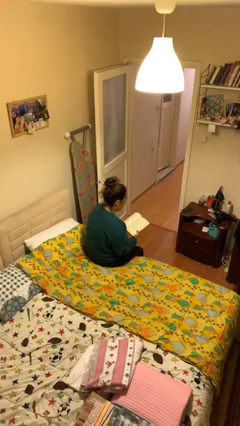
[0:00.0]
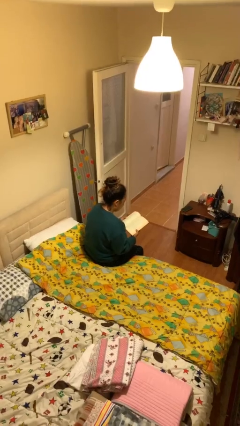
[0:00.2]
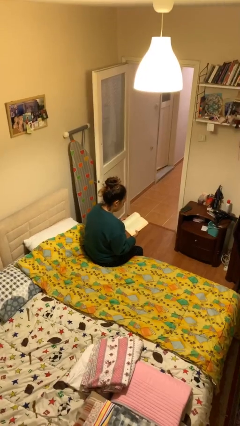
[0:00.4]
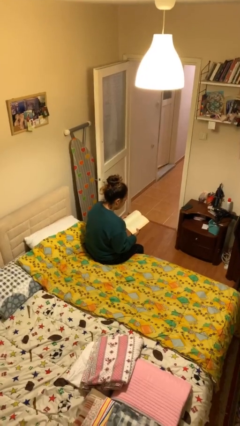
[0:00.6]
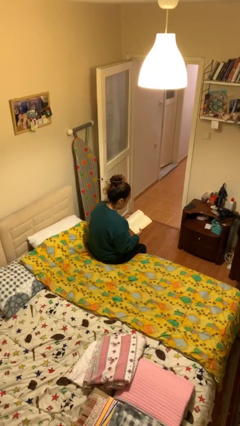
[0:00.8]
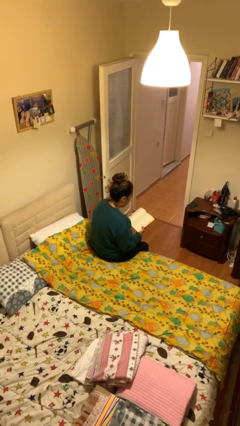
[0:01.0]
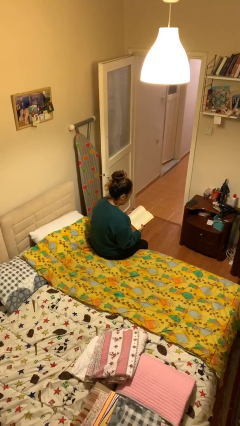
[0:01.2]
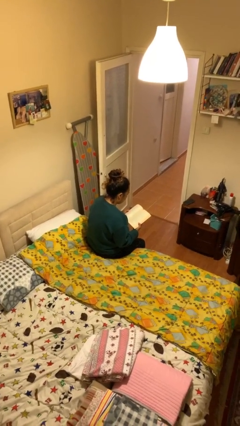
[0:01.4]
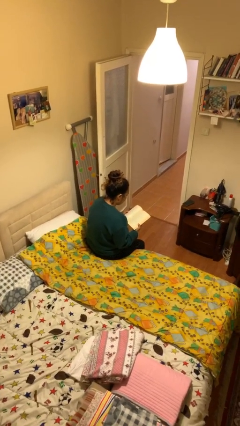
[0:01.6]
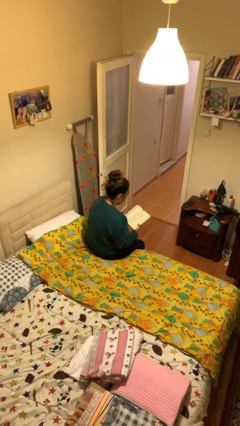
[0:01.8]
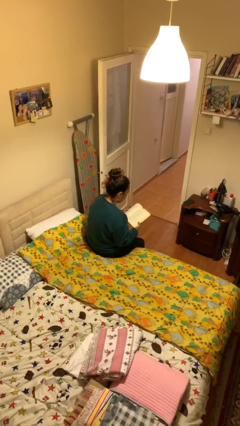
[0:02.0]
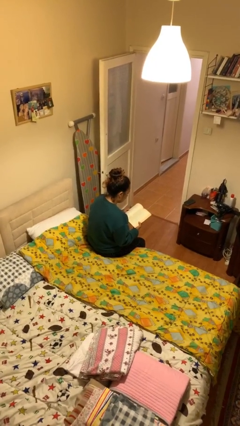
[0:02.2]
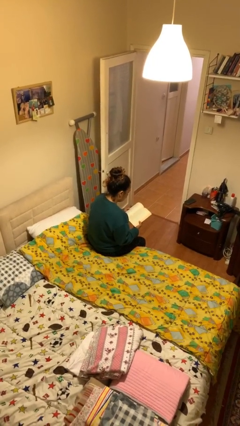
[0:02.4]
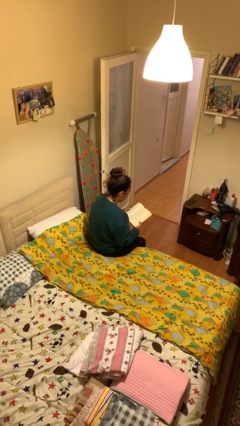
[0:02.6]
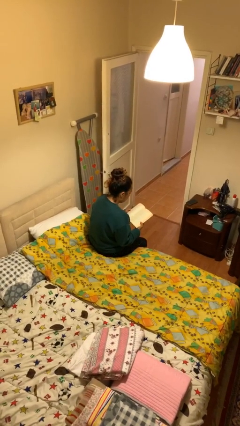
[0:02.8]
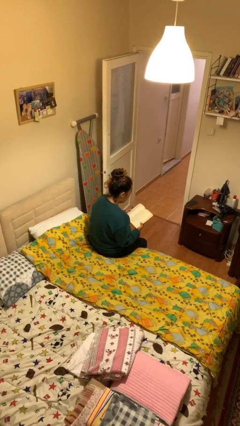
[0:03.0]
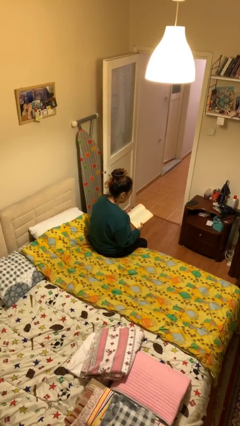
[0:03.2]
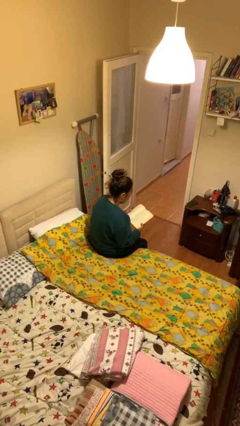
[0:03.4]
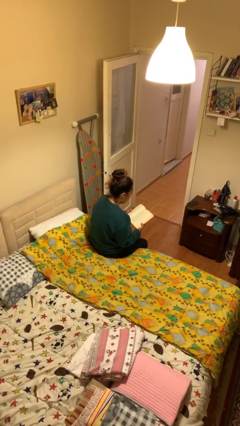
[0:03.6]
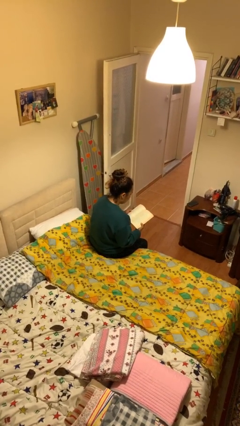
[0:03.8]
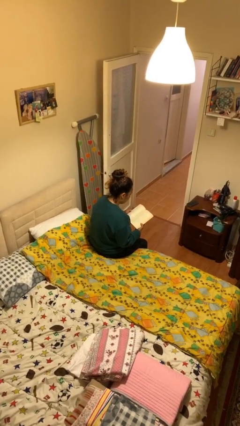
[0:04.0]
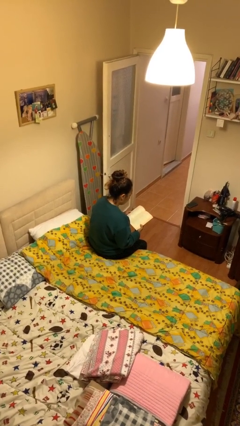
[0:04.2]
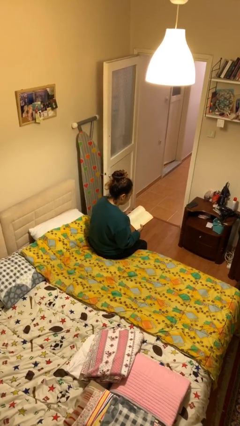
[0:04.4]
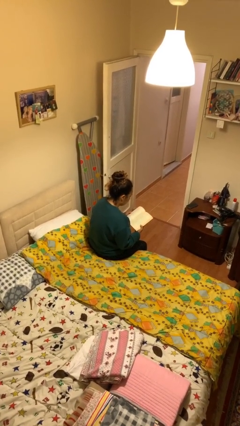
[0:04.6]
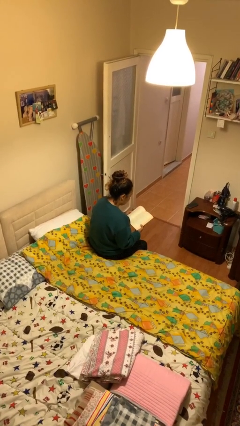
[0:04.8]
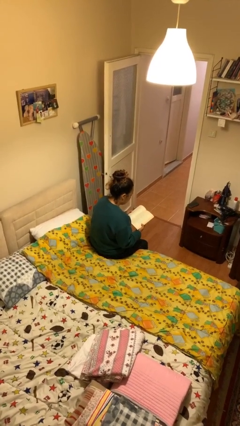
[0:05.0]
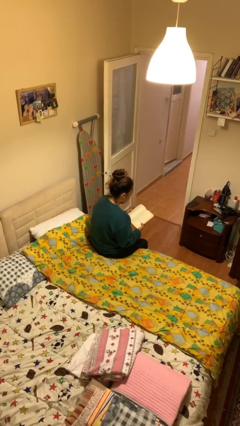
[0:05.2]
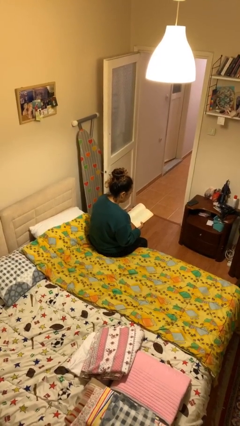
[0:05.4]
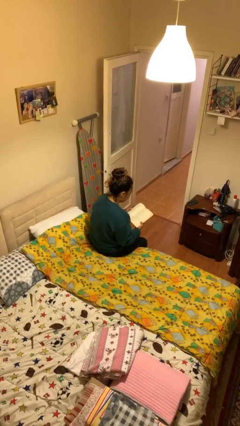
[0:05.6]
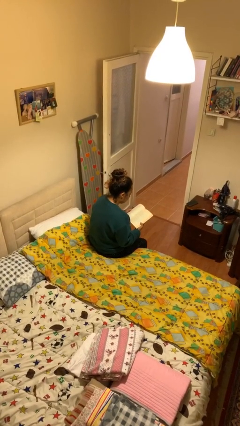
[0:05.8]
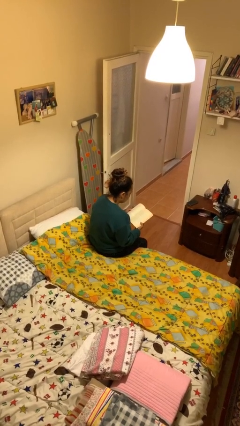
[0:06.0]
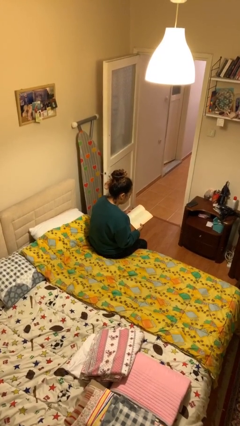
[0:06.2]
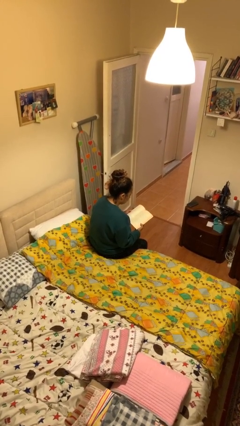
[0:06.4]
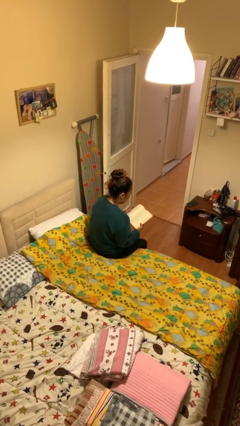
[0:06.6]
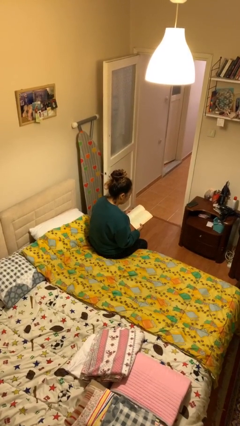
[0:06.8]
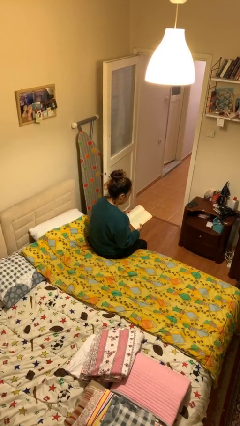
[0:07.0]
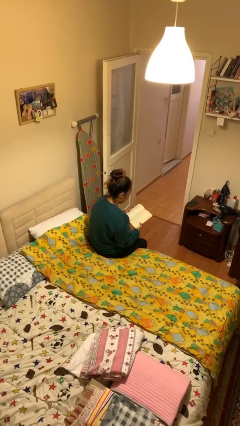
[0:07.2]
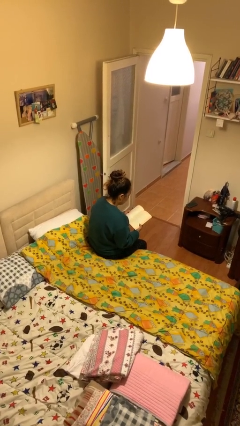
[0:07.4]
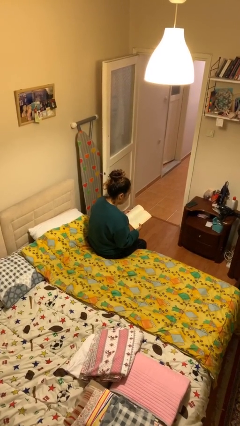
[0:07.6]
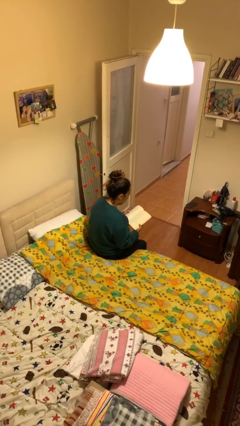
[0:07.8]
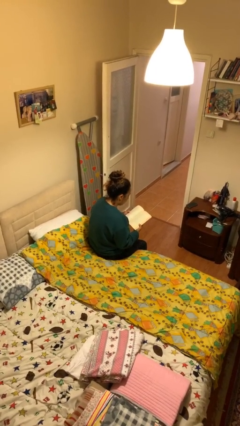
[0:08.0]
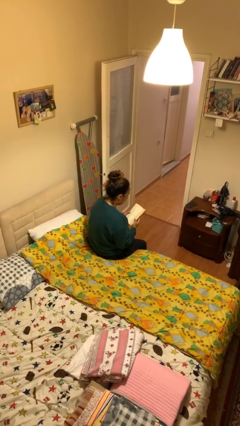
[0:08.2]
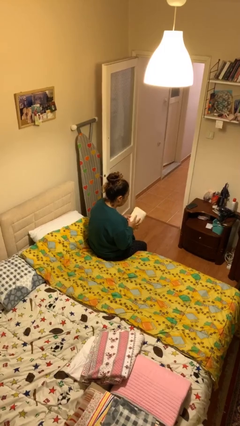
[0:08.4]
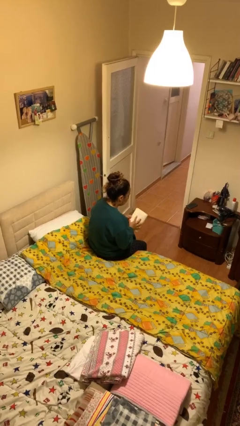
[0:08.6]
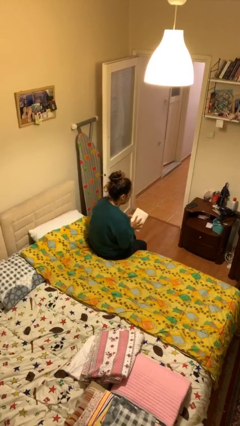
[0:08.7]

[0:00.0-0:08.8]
person reads document

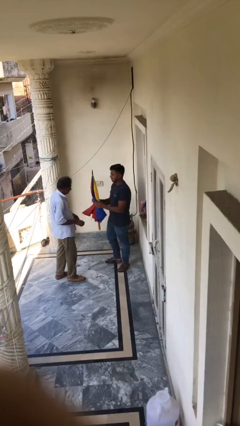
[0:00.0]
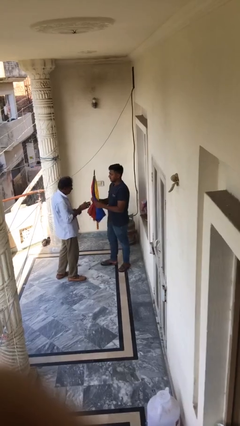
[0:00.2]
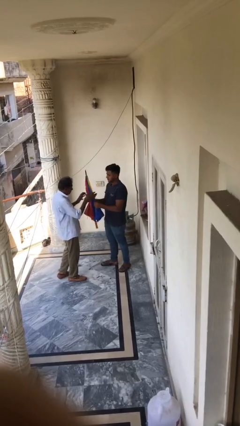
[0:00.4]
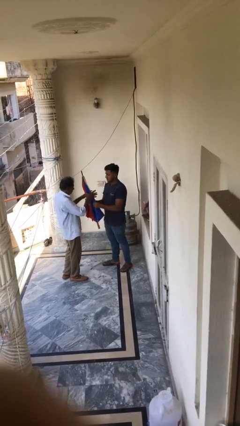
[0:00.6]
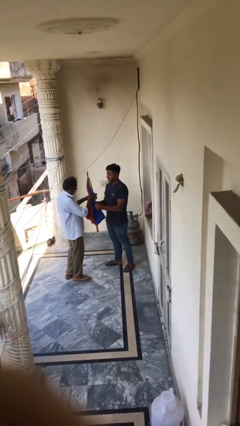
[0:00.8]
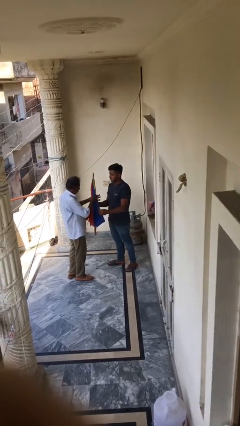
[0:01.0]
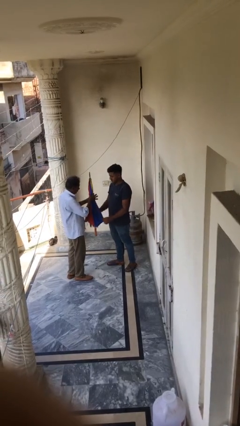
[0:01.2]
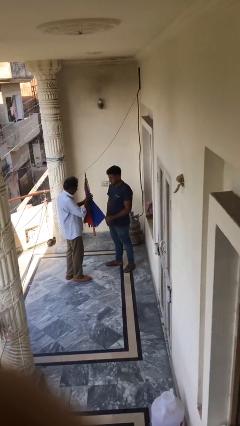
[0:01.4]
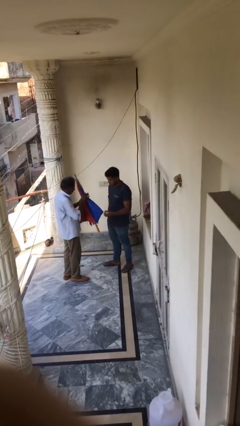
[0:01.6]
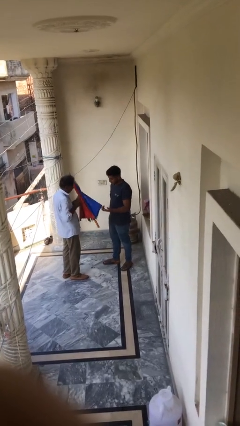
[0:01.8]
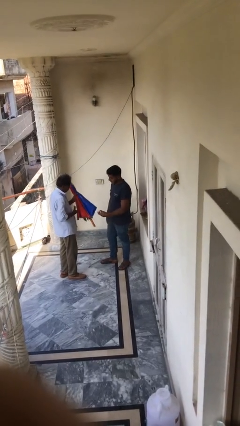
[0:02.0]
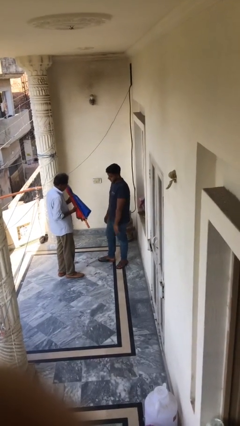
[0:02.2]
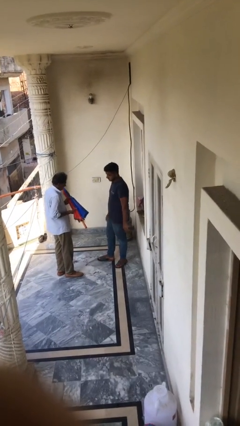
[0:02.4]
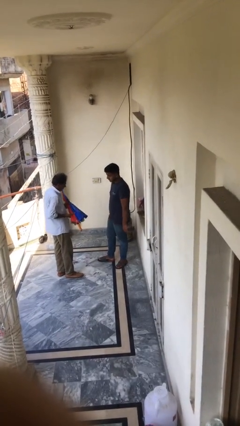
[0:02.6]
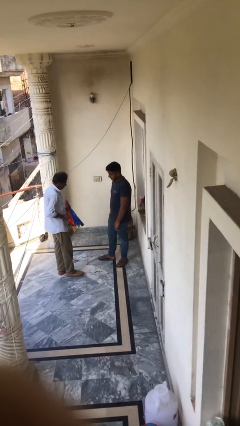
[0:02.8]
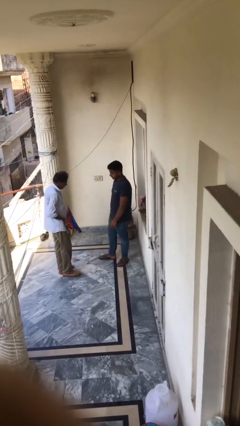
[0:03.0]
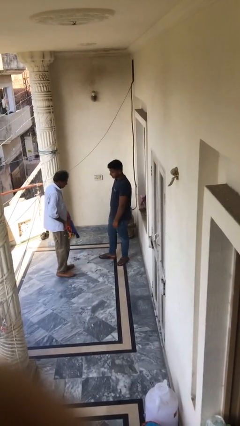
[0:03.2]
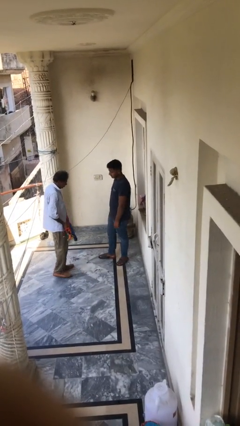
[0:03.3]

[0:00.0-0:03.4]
person transfers object to person

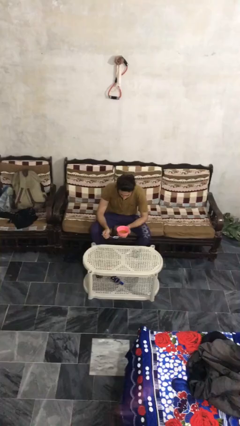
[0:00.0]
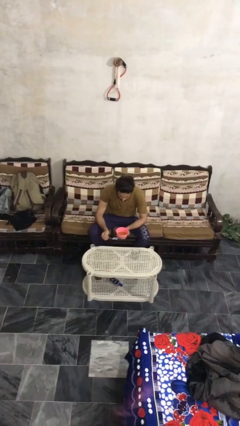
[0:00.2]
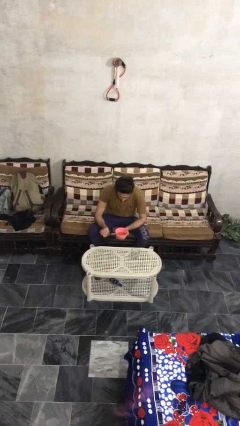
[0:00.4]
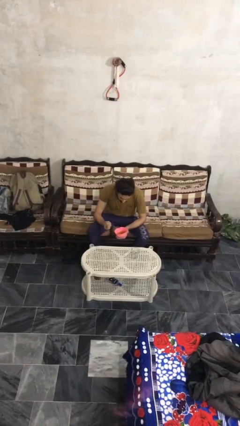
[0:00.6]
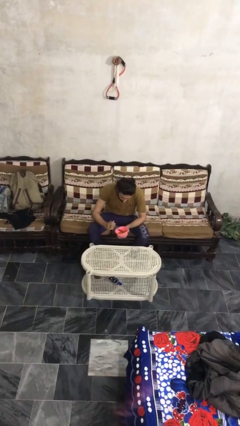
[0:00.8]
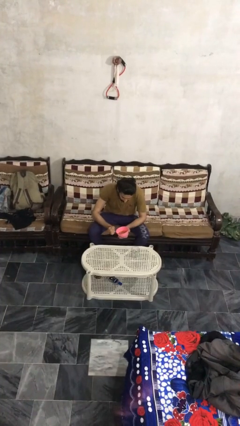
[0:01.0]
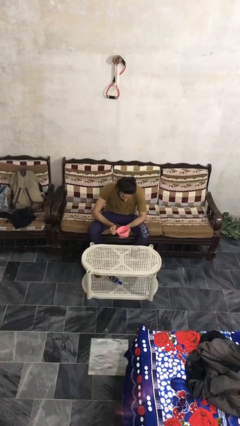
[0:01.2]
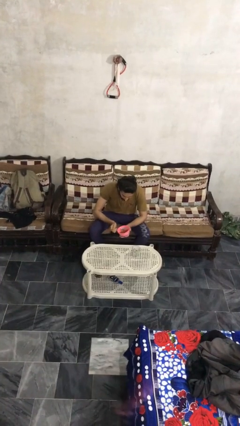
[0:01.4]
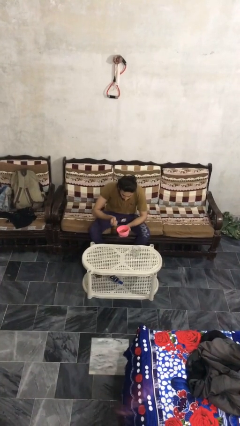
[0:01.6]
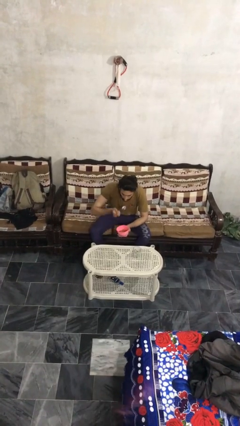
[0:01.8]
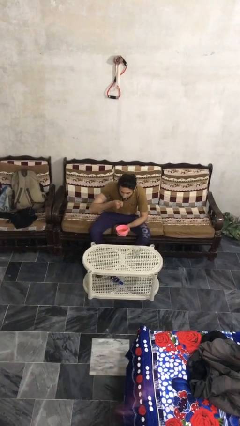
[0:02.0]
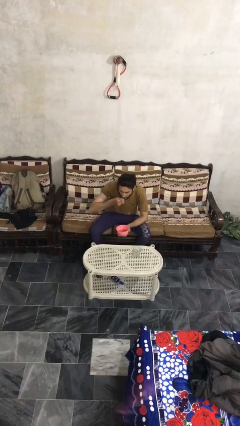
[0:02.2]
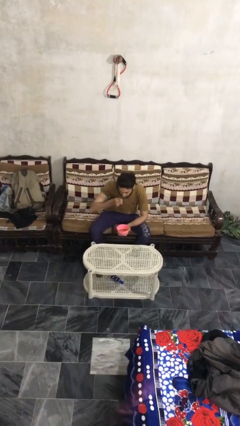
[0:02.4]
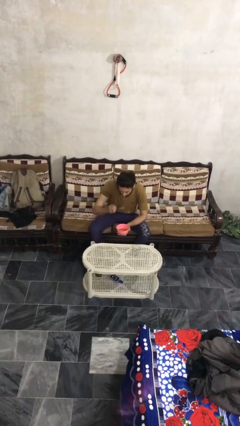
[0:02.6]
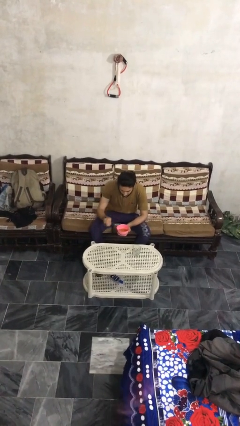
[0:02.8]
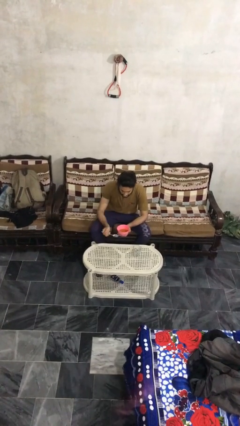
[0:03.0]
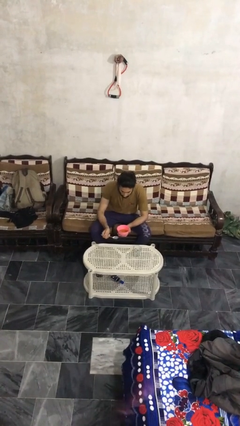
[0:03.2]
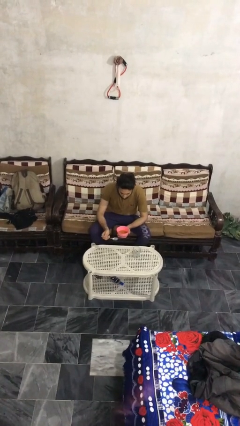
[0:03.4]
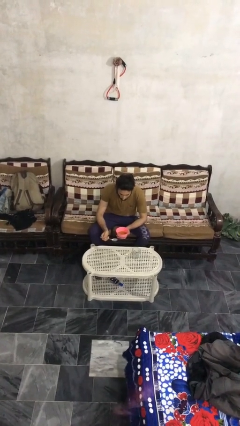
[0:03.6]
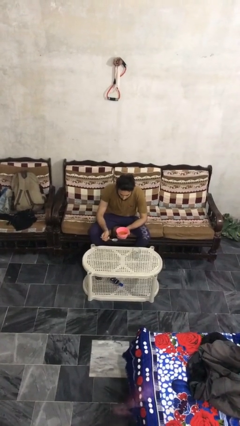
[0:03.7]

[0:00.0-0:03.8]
person eats with utensil

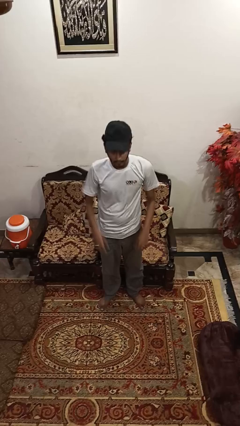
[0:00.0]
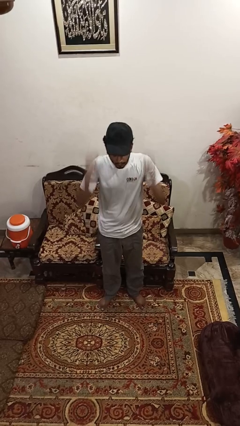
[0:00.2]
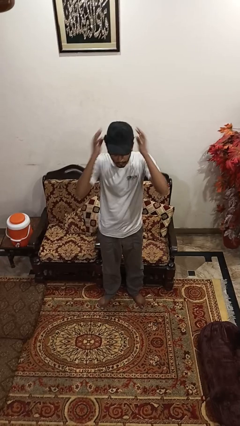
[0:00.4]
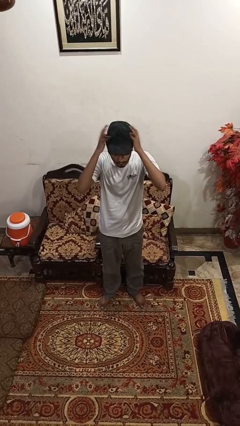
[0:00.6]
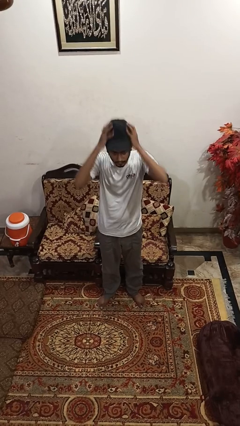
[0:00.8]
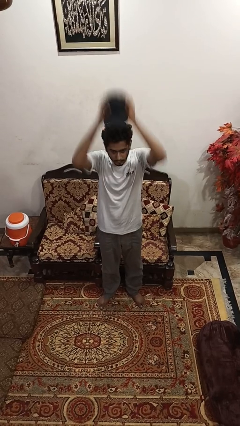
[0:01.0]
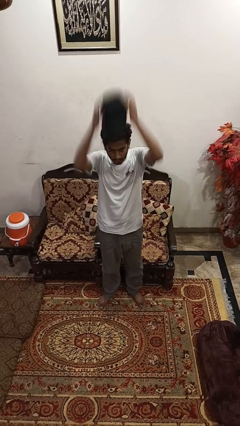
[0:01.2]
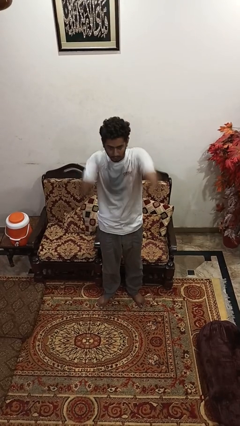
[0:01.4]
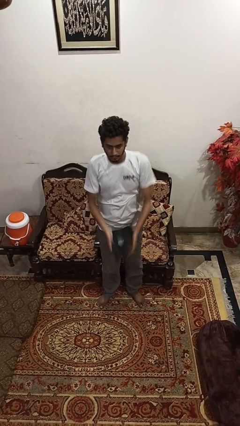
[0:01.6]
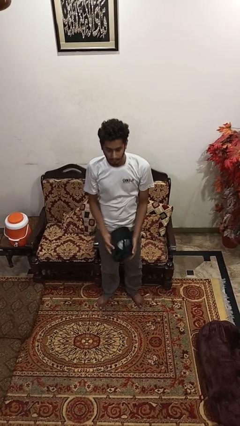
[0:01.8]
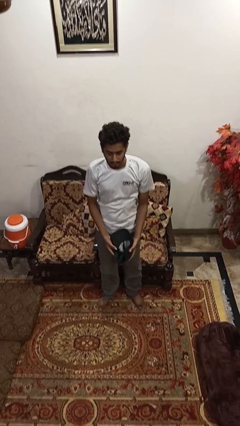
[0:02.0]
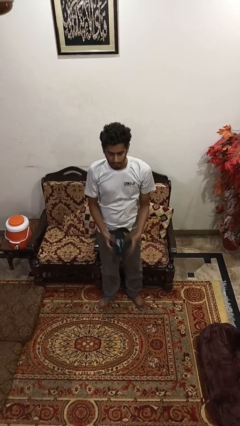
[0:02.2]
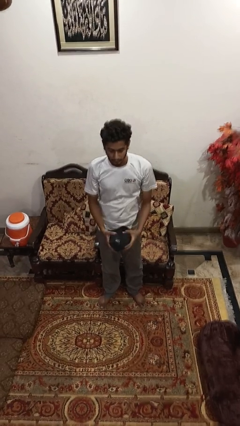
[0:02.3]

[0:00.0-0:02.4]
person takes off hat
